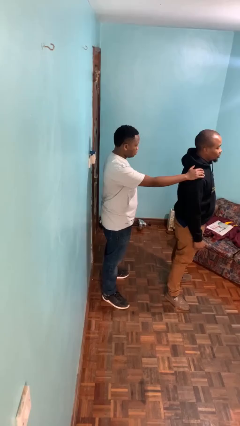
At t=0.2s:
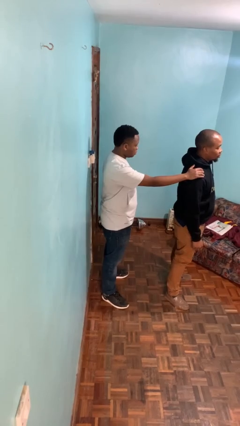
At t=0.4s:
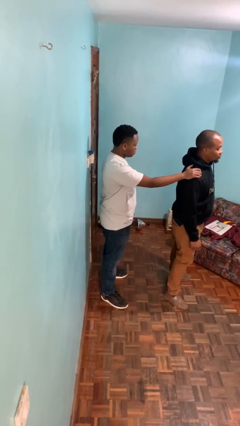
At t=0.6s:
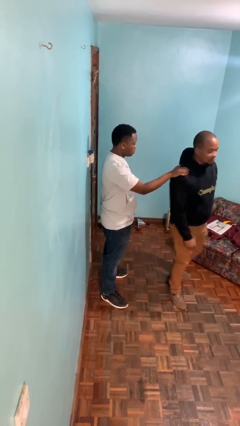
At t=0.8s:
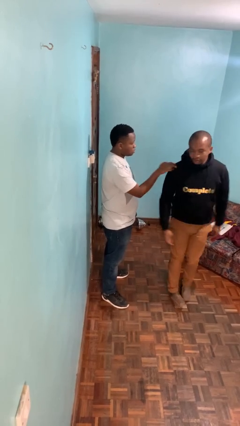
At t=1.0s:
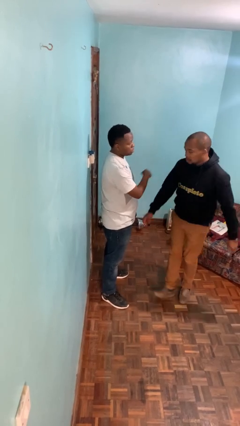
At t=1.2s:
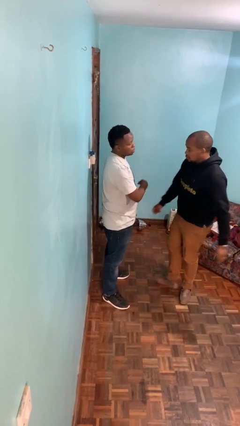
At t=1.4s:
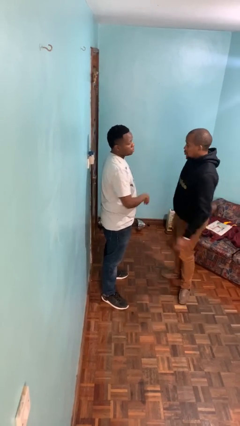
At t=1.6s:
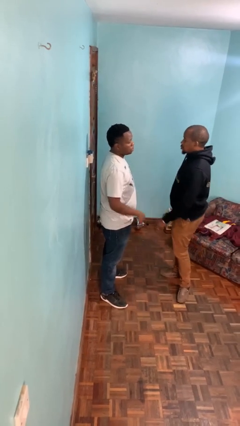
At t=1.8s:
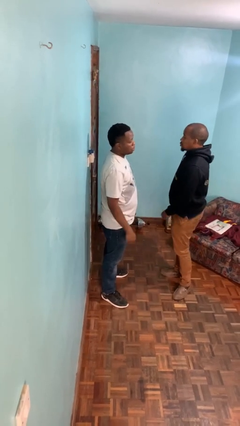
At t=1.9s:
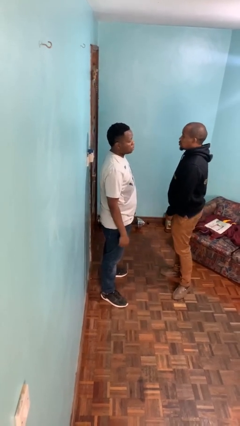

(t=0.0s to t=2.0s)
person spins person around

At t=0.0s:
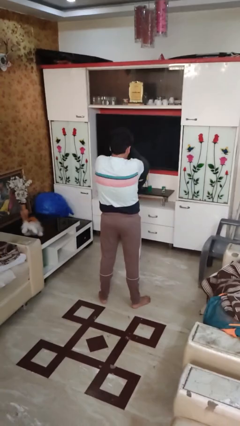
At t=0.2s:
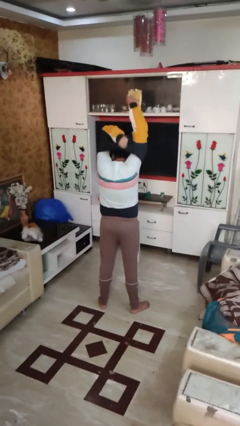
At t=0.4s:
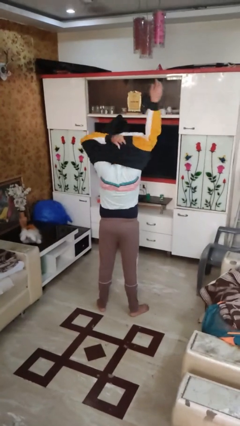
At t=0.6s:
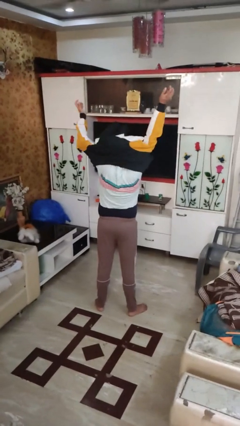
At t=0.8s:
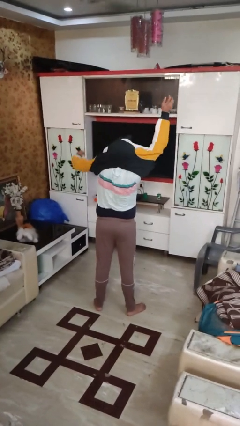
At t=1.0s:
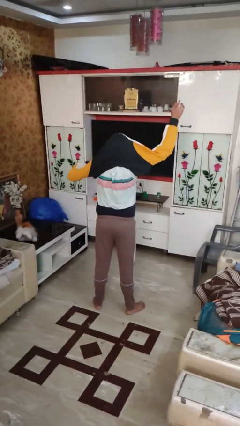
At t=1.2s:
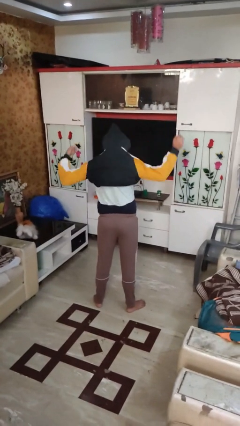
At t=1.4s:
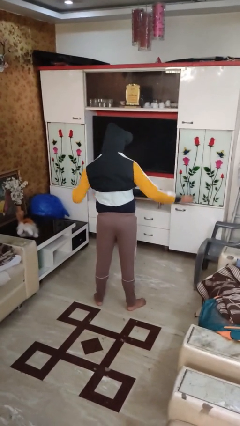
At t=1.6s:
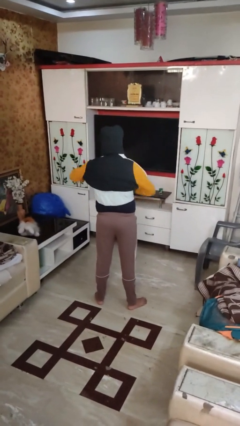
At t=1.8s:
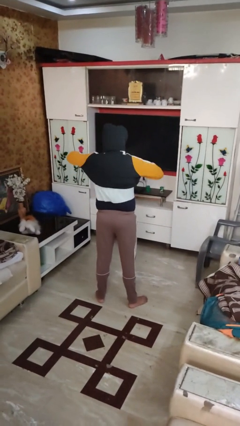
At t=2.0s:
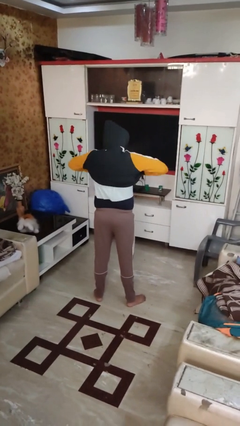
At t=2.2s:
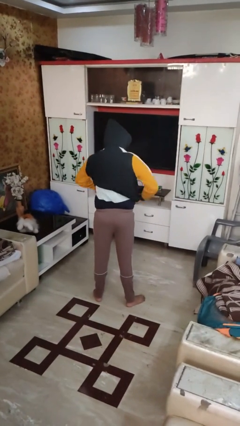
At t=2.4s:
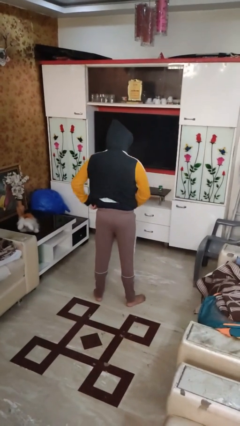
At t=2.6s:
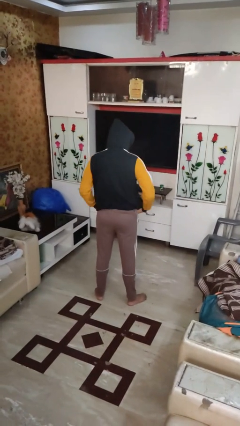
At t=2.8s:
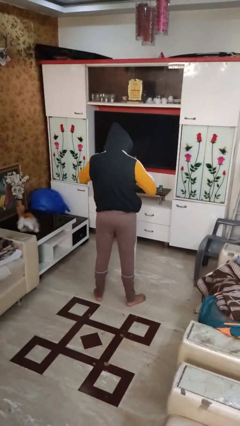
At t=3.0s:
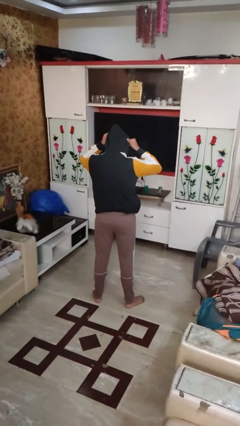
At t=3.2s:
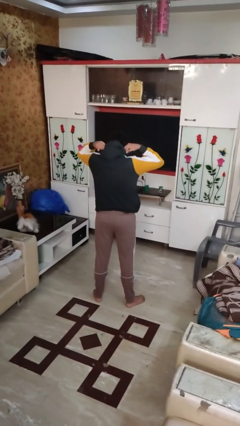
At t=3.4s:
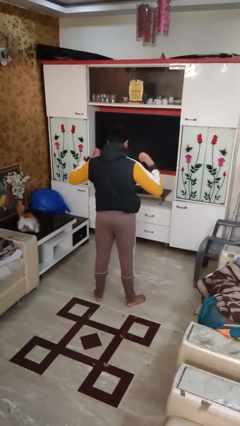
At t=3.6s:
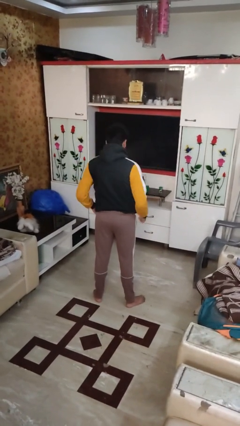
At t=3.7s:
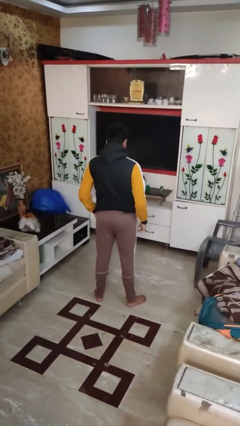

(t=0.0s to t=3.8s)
person puts on hoodie

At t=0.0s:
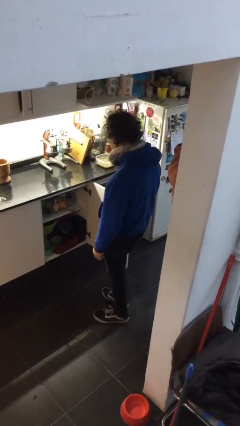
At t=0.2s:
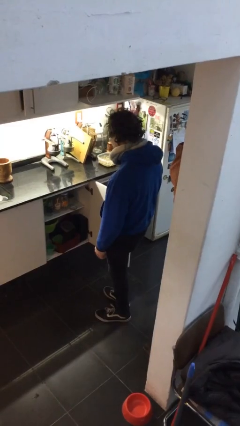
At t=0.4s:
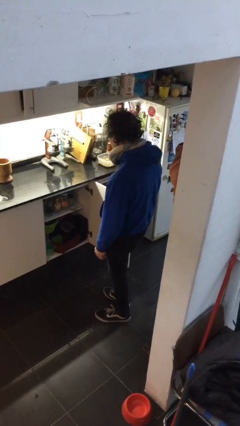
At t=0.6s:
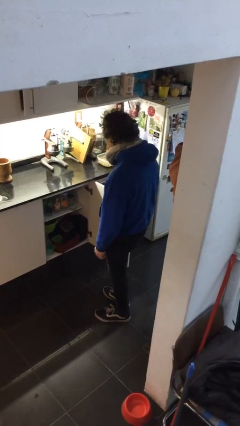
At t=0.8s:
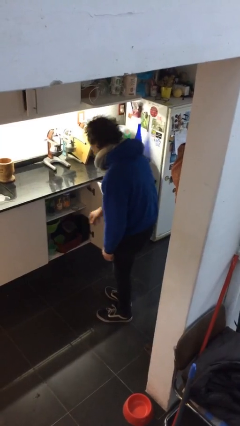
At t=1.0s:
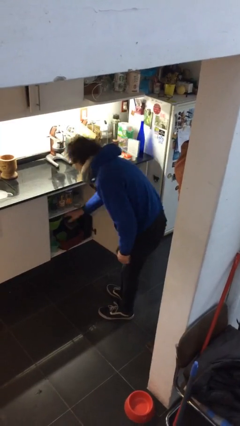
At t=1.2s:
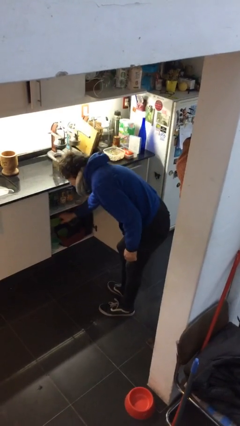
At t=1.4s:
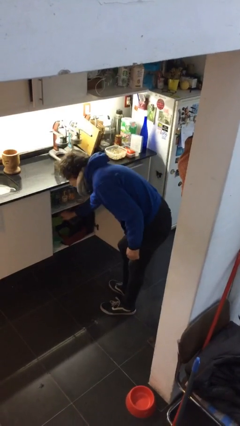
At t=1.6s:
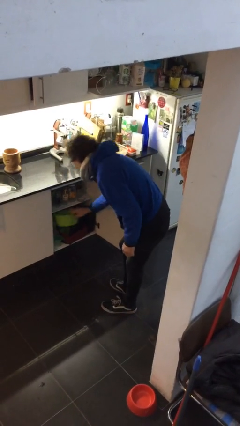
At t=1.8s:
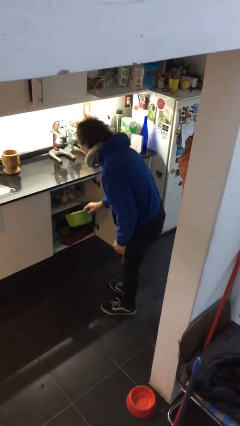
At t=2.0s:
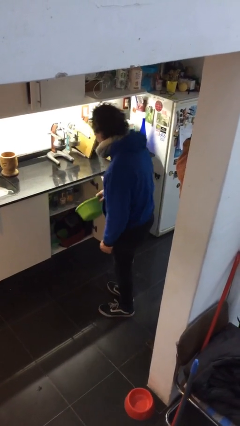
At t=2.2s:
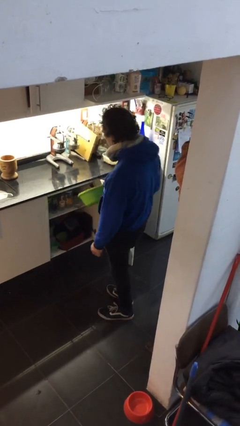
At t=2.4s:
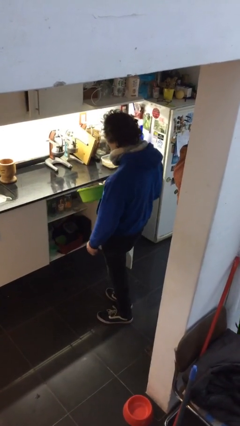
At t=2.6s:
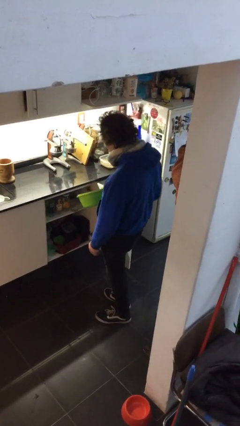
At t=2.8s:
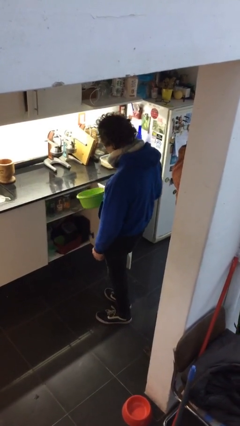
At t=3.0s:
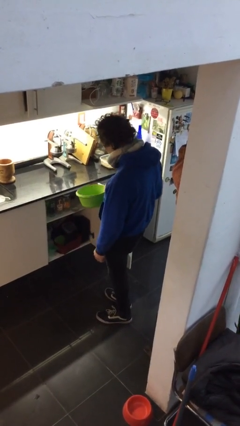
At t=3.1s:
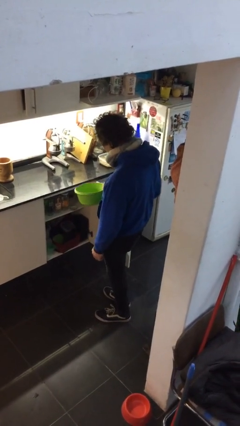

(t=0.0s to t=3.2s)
person picks up object from cabinet

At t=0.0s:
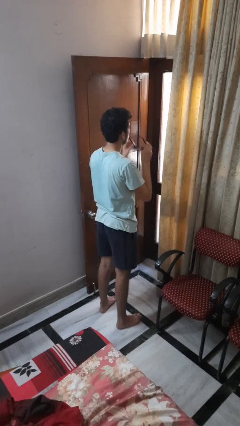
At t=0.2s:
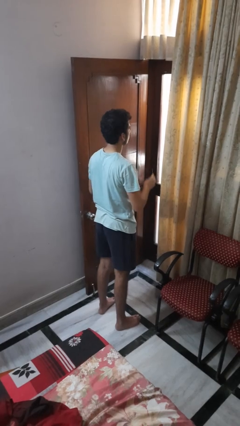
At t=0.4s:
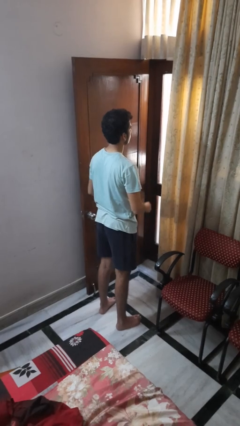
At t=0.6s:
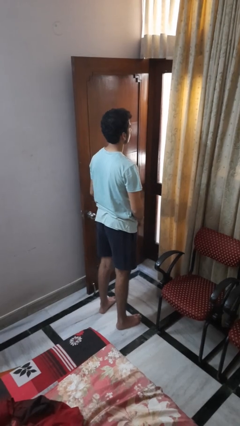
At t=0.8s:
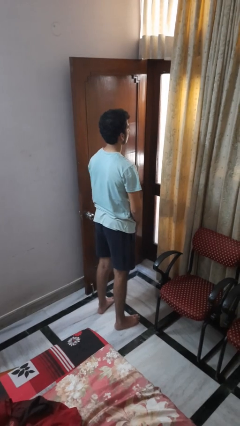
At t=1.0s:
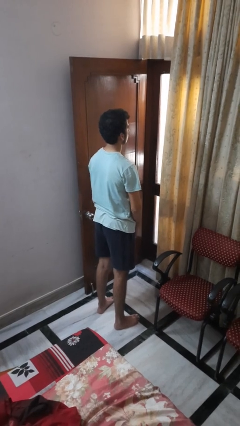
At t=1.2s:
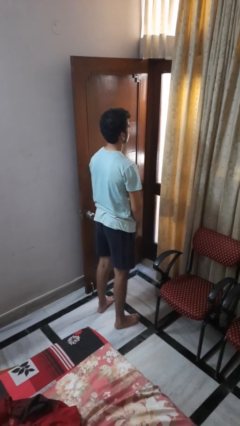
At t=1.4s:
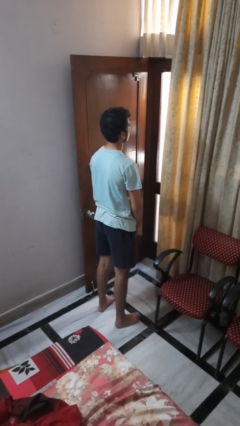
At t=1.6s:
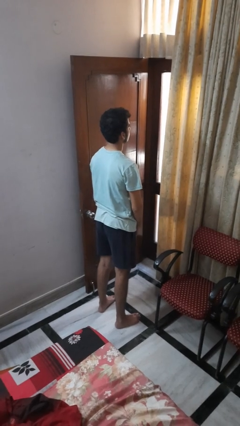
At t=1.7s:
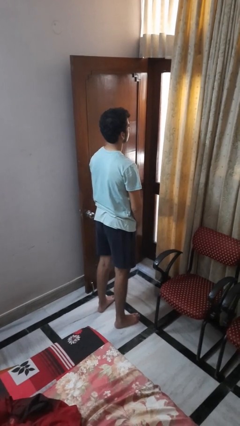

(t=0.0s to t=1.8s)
person takes off sunglasses

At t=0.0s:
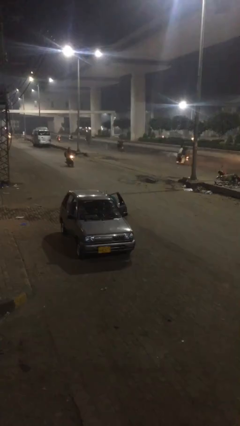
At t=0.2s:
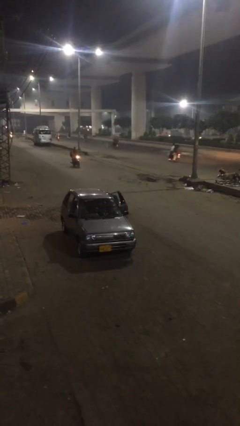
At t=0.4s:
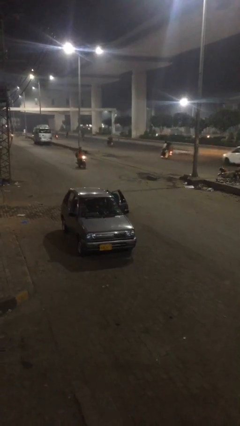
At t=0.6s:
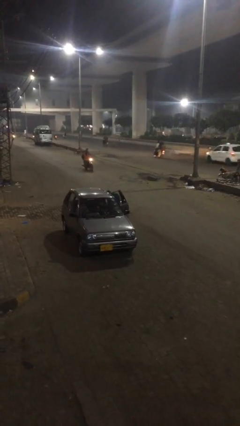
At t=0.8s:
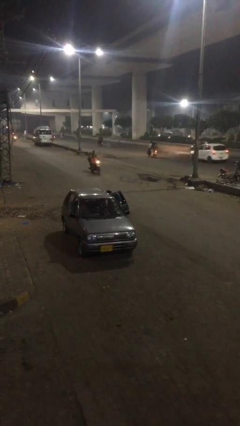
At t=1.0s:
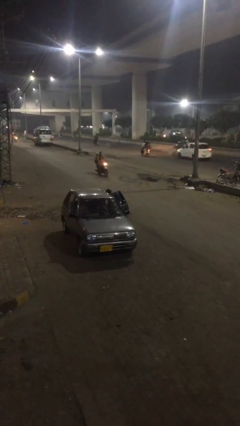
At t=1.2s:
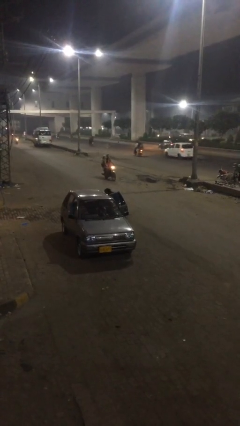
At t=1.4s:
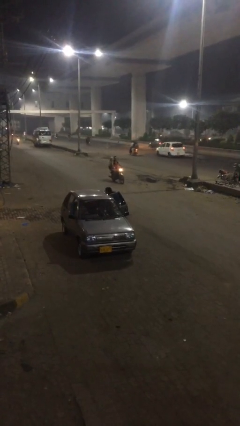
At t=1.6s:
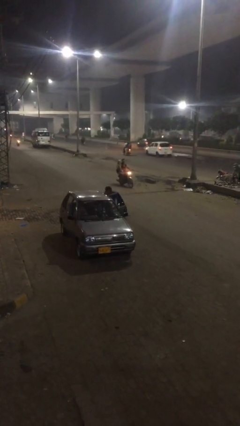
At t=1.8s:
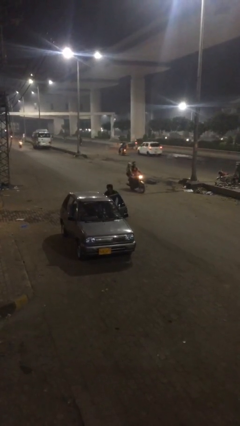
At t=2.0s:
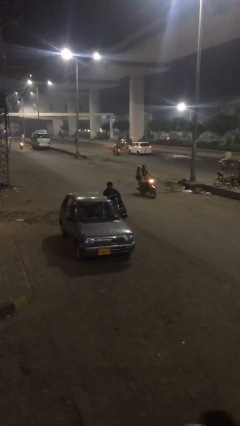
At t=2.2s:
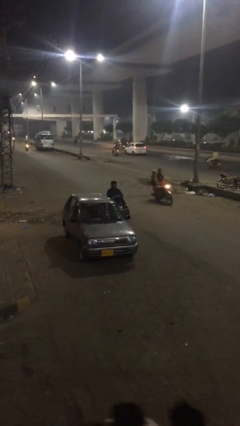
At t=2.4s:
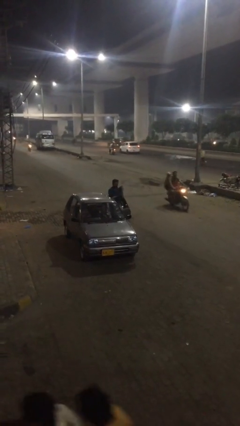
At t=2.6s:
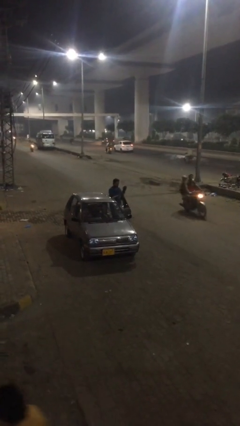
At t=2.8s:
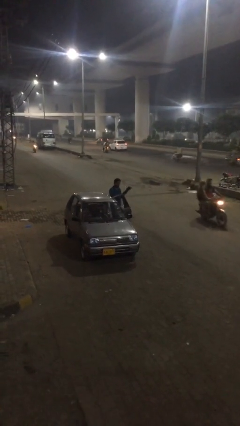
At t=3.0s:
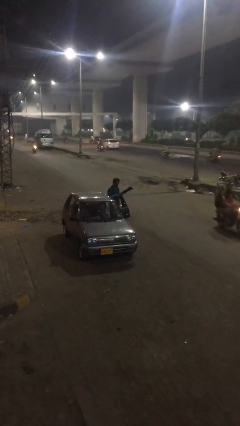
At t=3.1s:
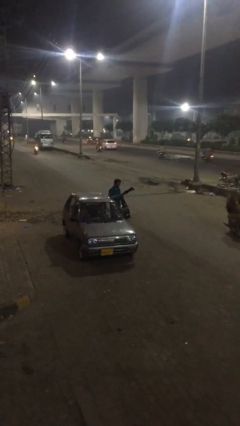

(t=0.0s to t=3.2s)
person unloads car

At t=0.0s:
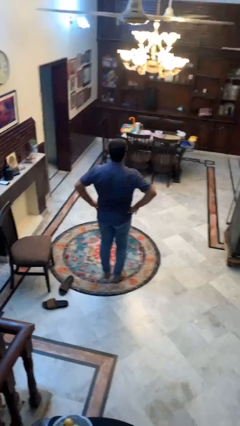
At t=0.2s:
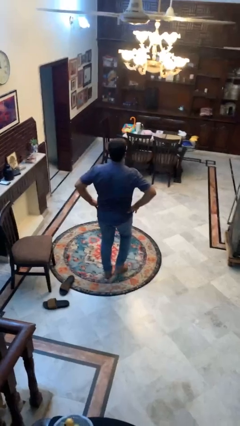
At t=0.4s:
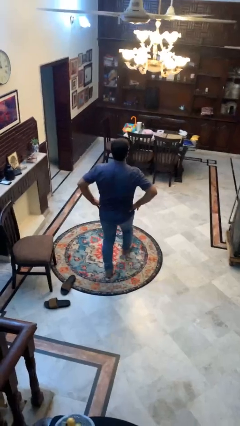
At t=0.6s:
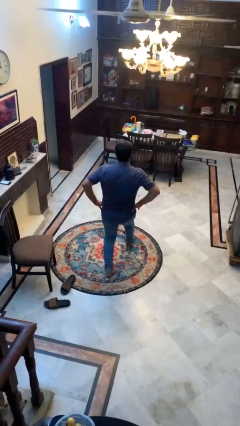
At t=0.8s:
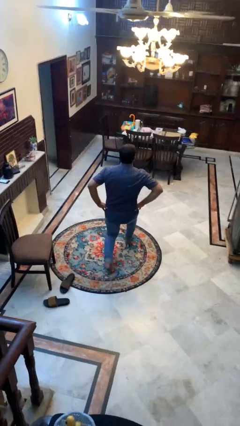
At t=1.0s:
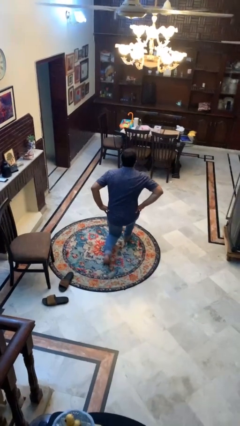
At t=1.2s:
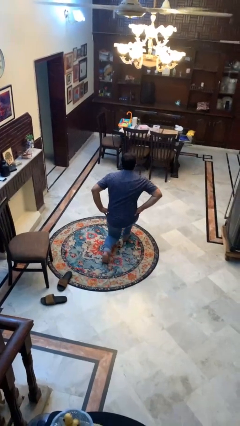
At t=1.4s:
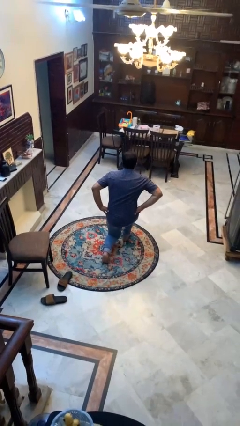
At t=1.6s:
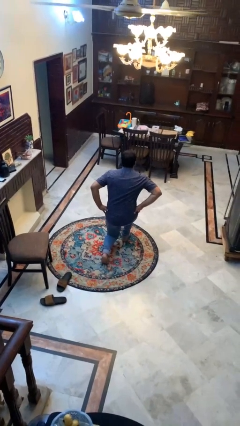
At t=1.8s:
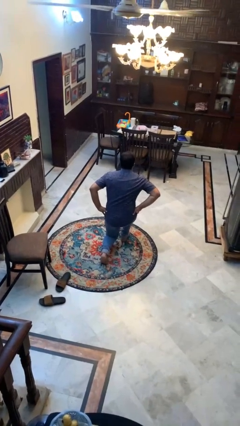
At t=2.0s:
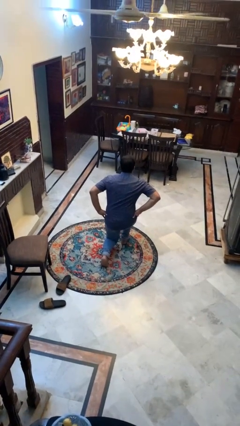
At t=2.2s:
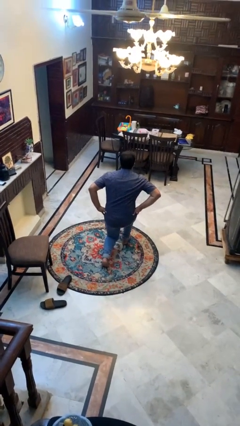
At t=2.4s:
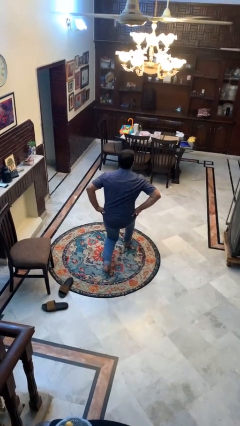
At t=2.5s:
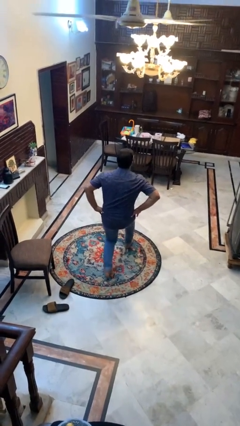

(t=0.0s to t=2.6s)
person exercises with lunges

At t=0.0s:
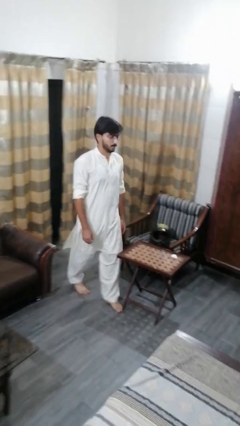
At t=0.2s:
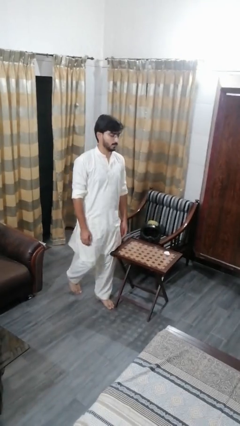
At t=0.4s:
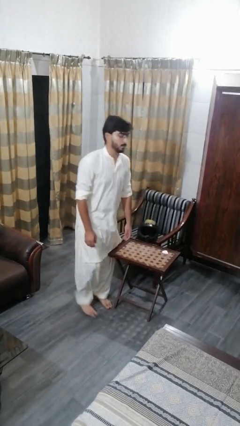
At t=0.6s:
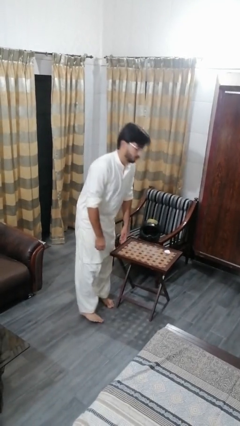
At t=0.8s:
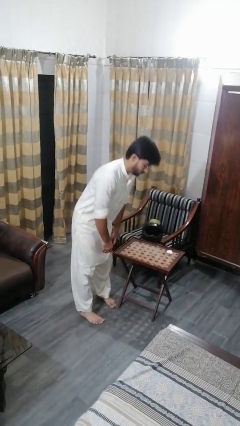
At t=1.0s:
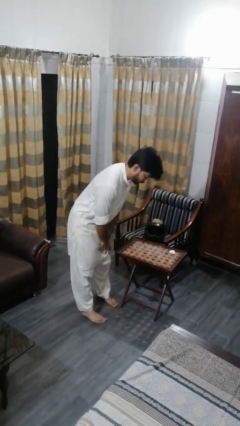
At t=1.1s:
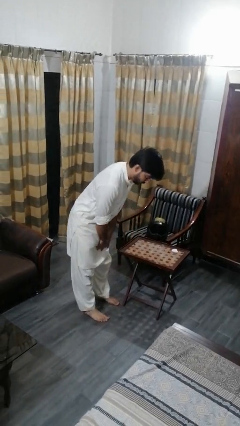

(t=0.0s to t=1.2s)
person bumps into table
